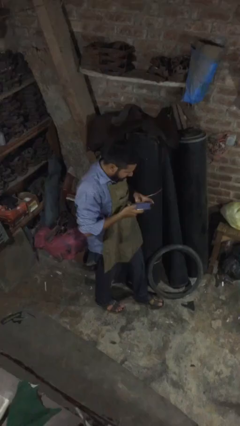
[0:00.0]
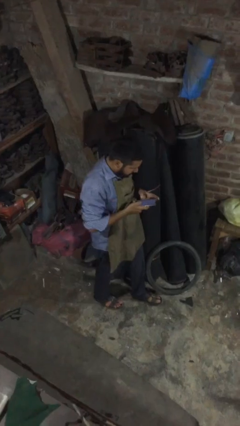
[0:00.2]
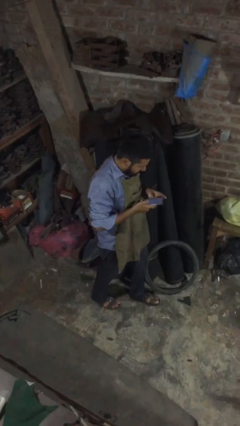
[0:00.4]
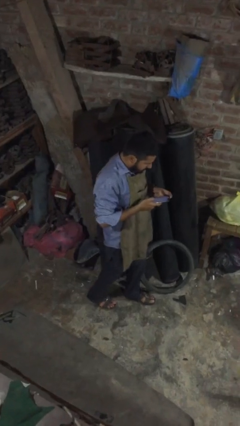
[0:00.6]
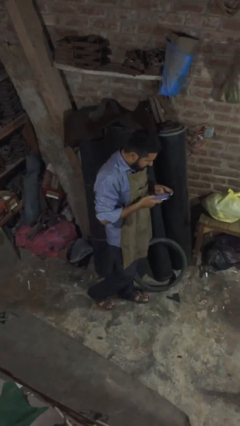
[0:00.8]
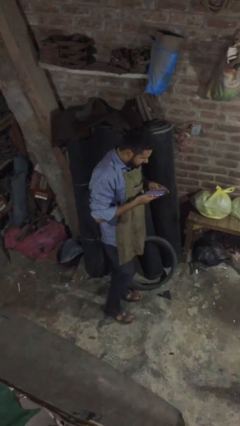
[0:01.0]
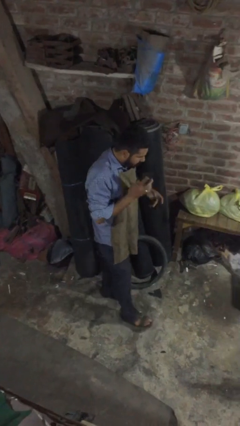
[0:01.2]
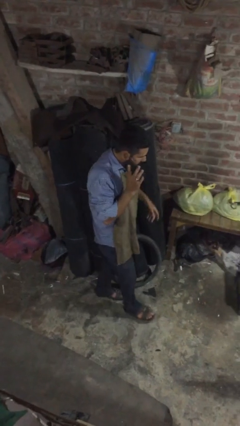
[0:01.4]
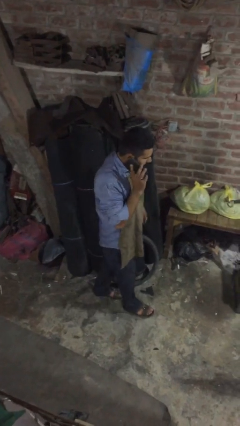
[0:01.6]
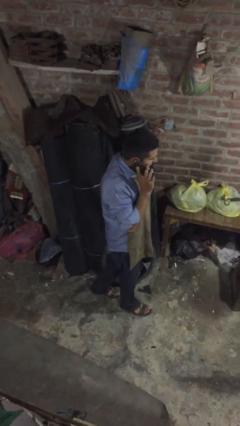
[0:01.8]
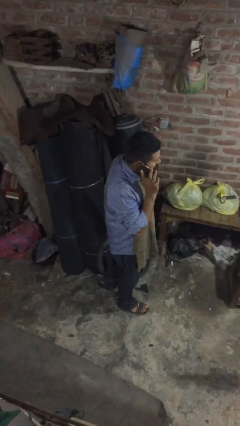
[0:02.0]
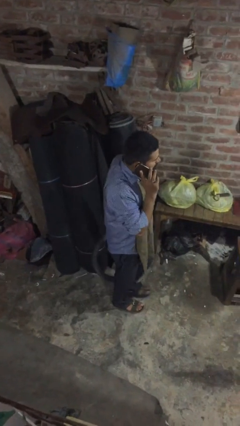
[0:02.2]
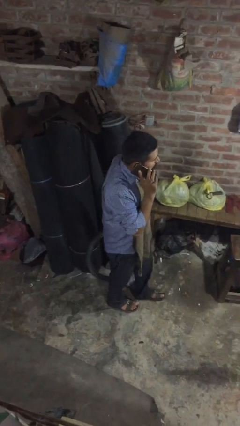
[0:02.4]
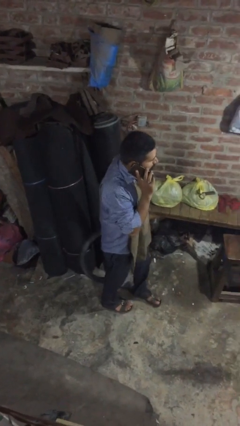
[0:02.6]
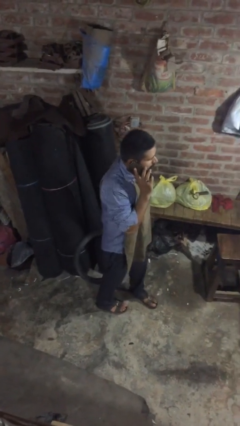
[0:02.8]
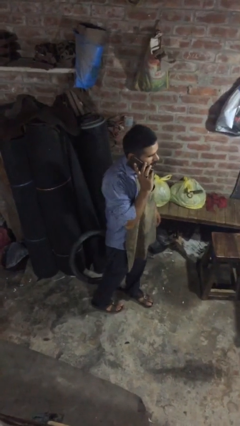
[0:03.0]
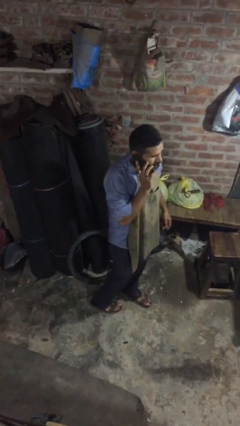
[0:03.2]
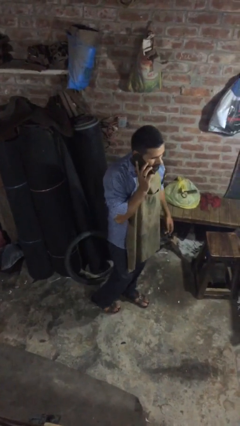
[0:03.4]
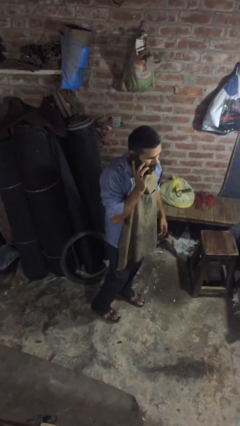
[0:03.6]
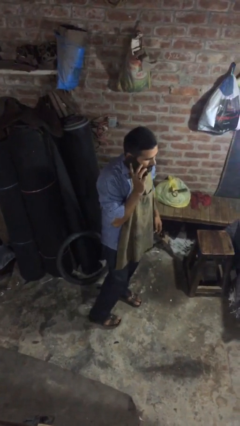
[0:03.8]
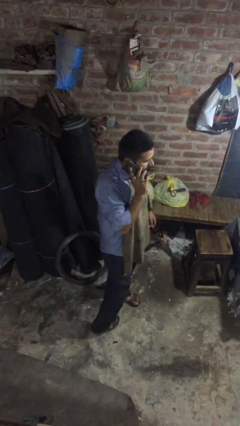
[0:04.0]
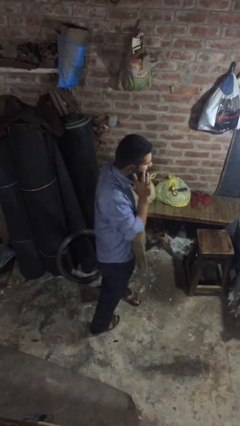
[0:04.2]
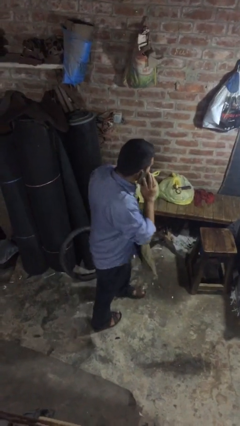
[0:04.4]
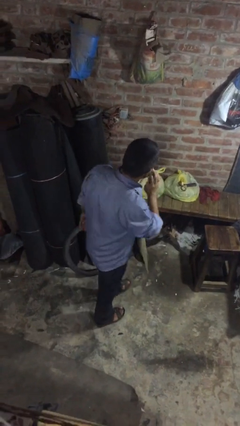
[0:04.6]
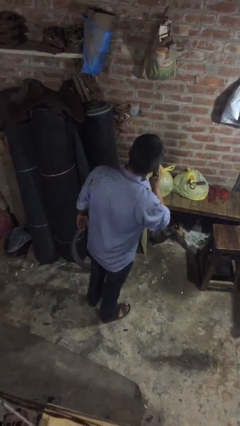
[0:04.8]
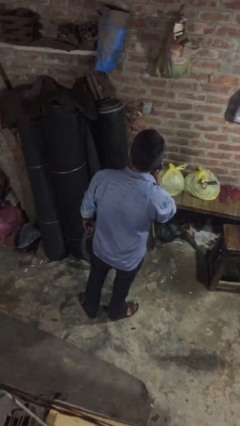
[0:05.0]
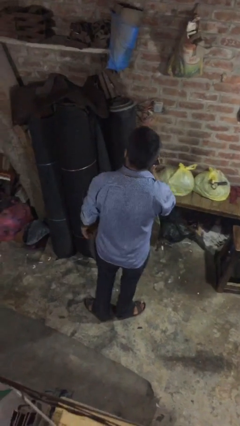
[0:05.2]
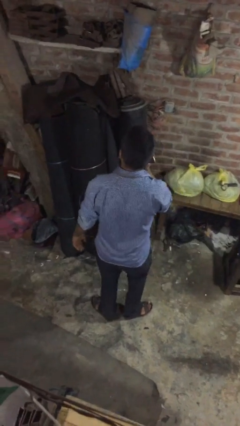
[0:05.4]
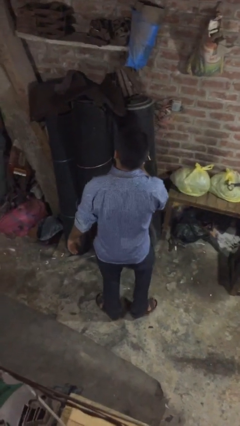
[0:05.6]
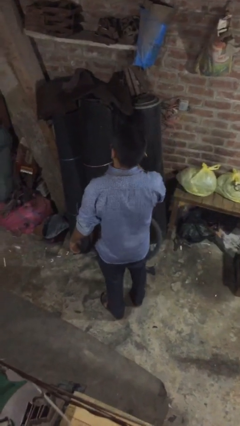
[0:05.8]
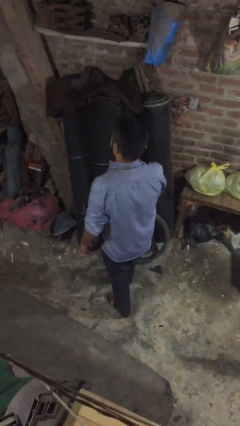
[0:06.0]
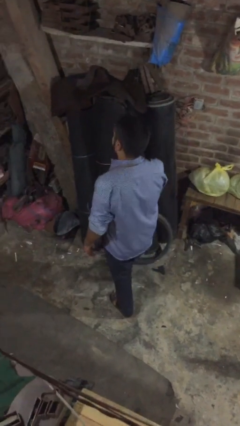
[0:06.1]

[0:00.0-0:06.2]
person talks on phone

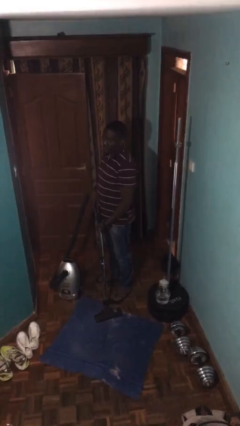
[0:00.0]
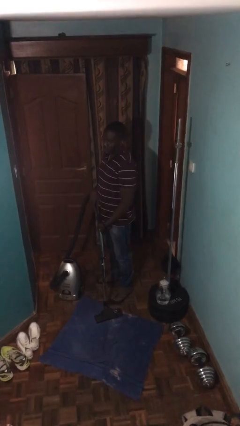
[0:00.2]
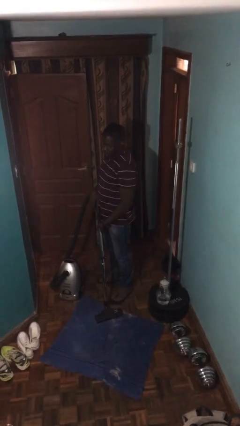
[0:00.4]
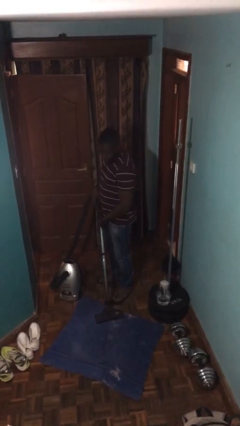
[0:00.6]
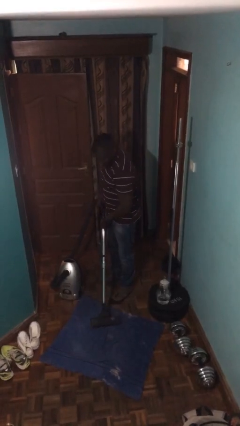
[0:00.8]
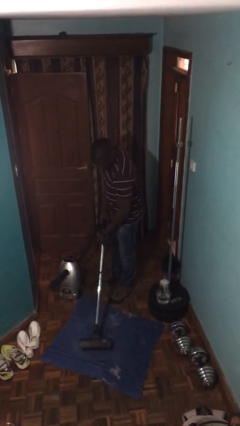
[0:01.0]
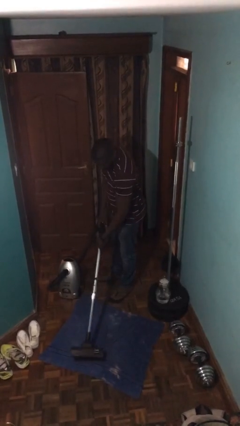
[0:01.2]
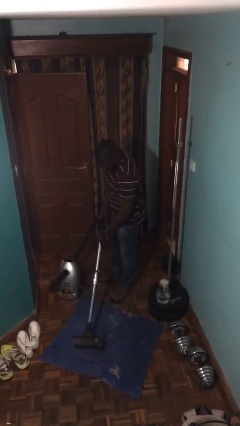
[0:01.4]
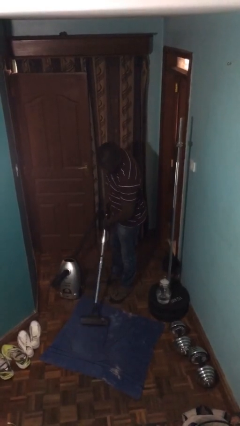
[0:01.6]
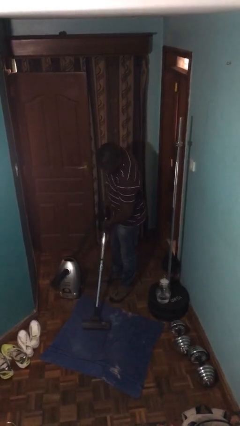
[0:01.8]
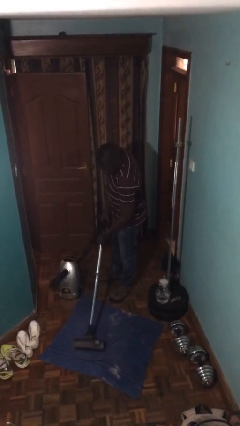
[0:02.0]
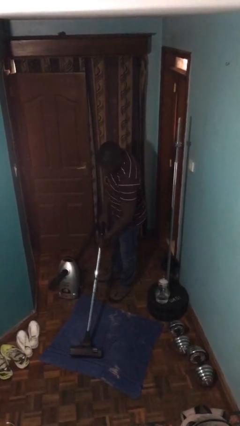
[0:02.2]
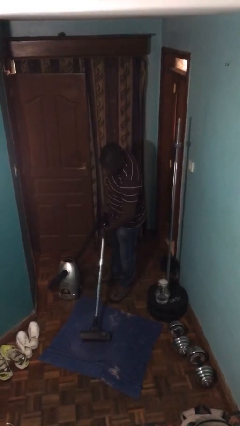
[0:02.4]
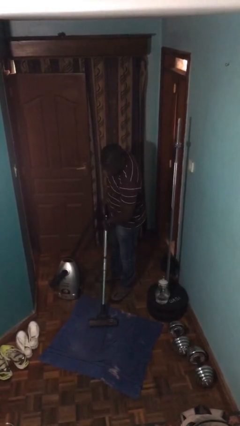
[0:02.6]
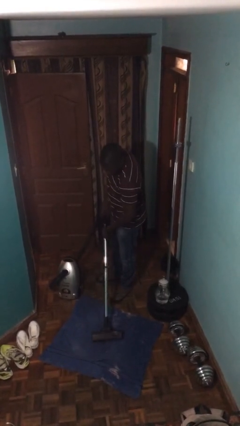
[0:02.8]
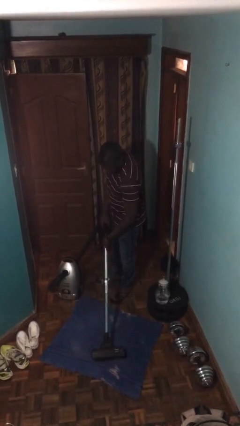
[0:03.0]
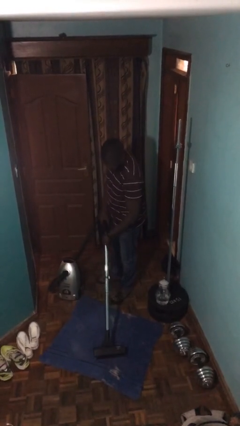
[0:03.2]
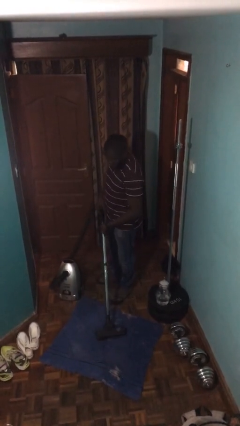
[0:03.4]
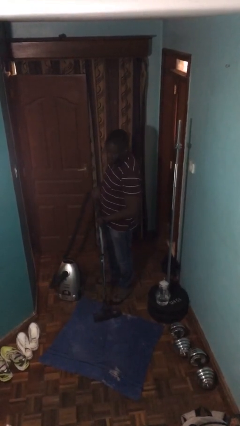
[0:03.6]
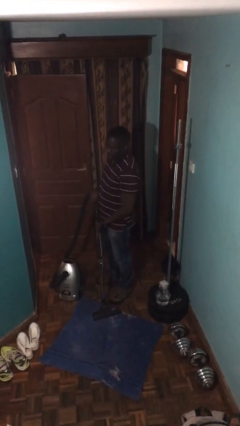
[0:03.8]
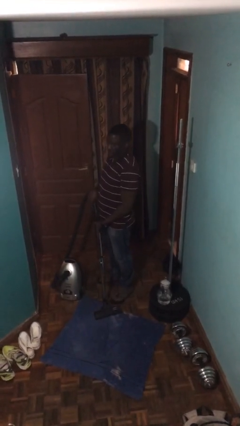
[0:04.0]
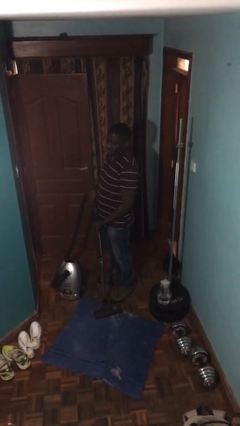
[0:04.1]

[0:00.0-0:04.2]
person vacuums carpet

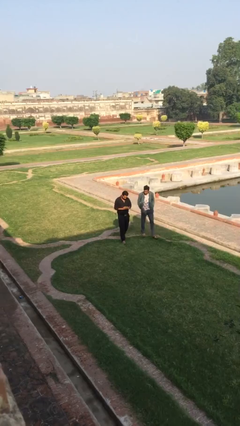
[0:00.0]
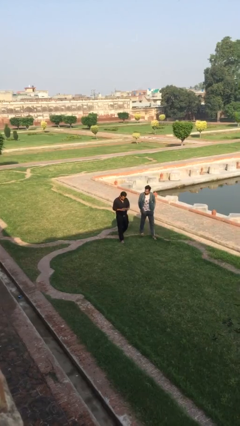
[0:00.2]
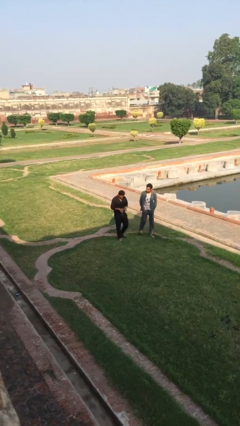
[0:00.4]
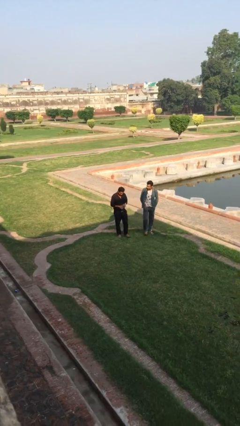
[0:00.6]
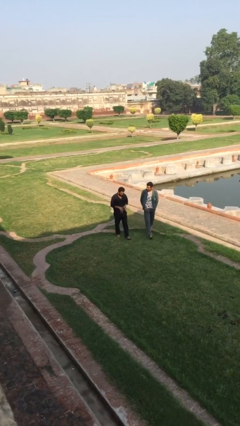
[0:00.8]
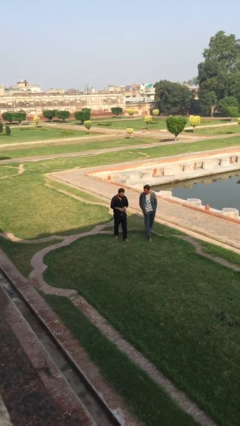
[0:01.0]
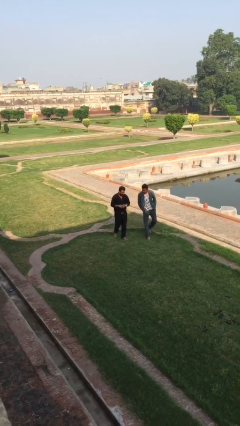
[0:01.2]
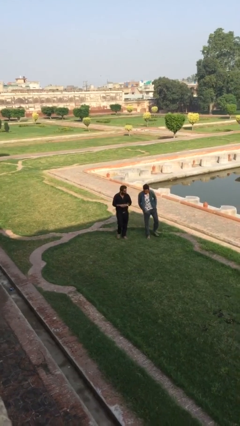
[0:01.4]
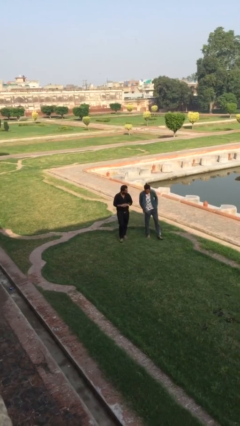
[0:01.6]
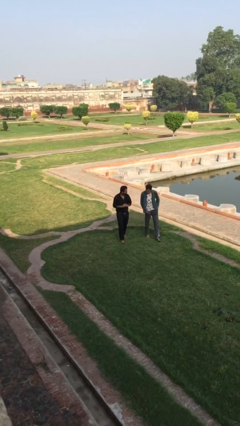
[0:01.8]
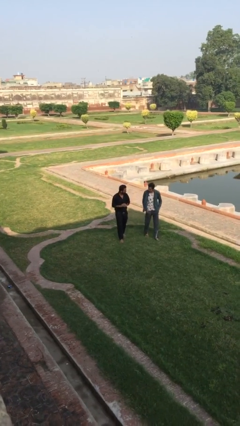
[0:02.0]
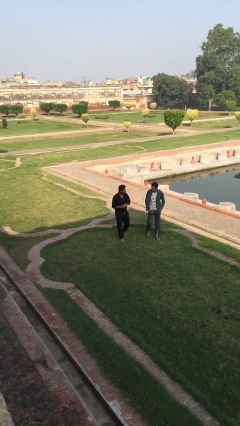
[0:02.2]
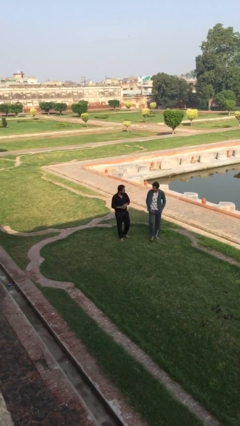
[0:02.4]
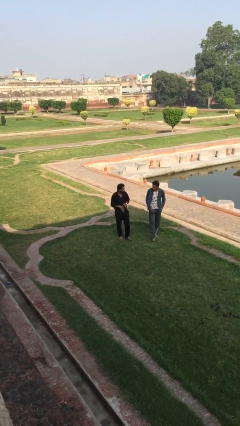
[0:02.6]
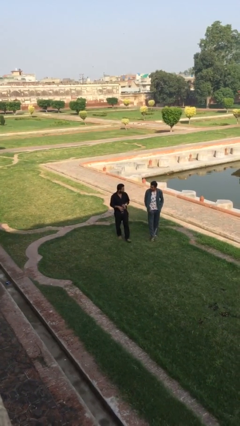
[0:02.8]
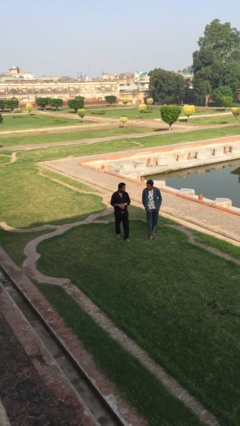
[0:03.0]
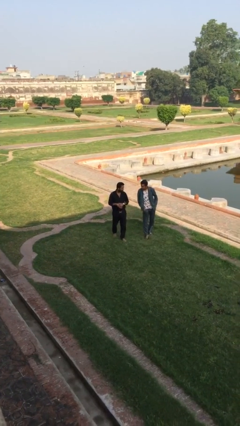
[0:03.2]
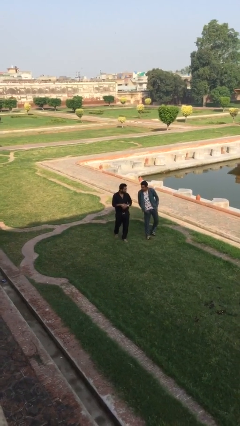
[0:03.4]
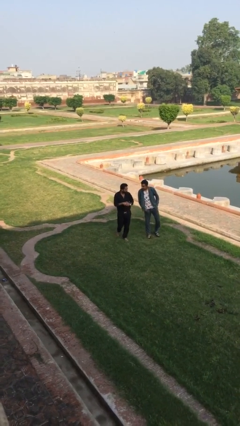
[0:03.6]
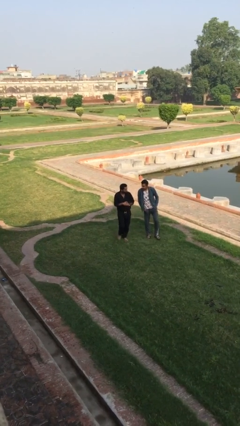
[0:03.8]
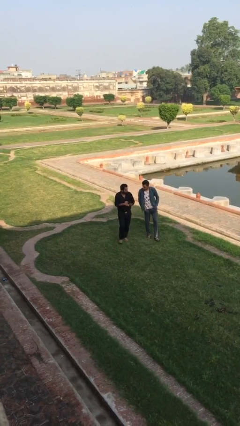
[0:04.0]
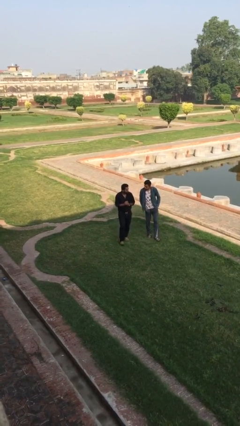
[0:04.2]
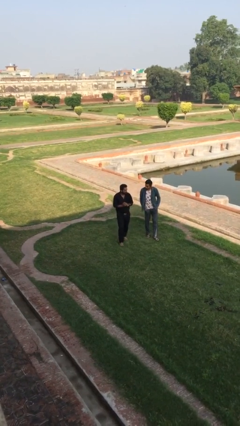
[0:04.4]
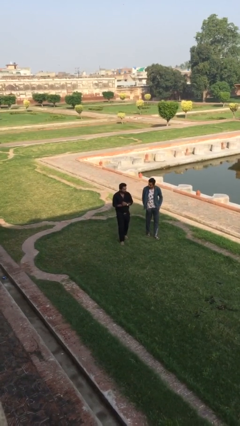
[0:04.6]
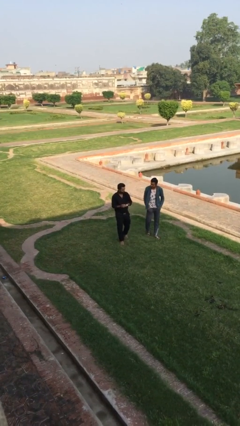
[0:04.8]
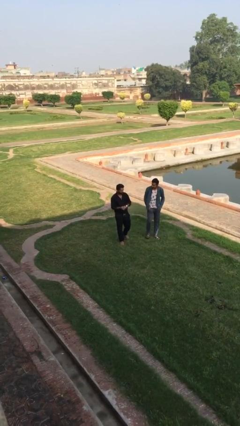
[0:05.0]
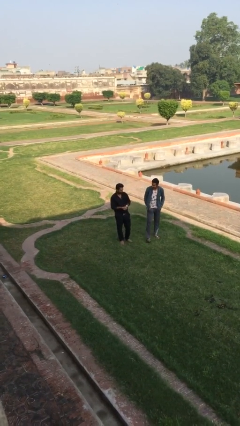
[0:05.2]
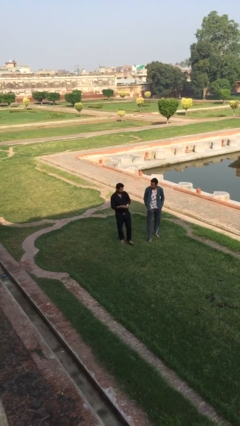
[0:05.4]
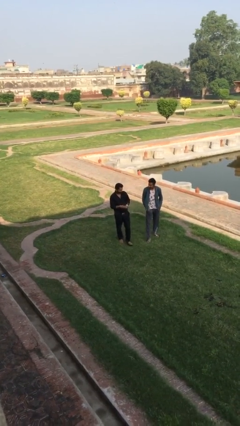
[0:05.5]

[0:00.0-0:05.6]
person talks to person

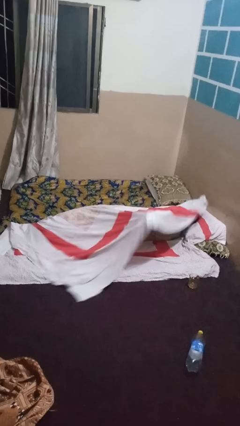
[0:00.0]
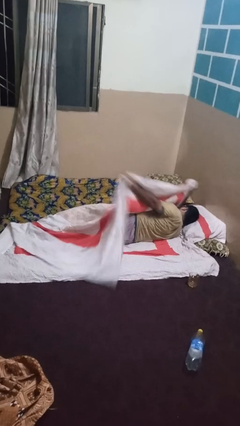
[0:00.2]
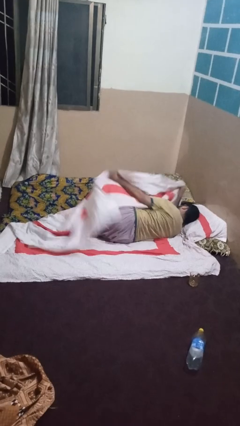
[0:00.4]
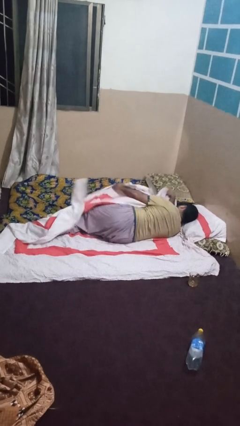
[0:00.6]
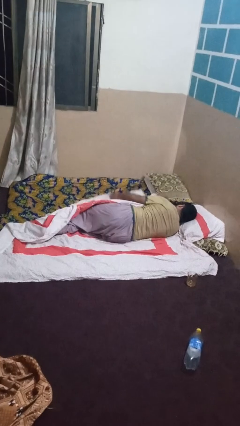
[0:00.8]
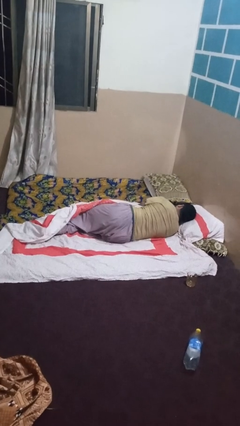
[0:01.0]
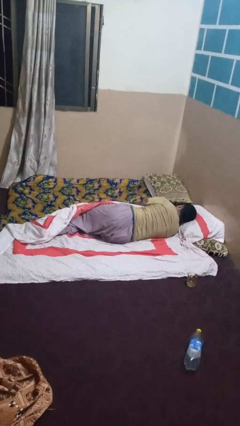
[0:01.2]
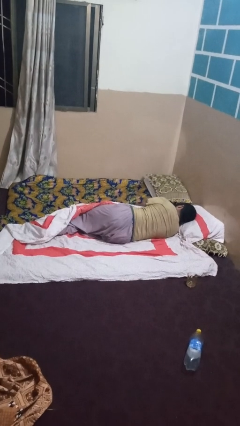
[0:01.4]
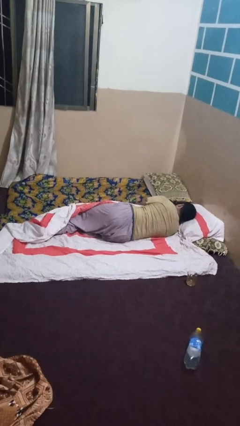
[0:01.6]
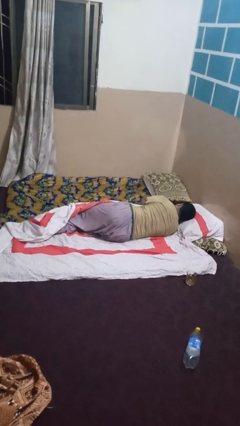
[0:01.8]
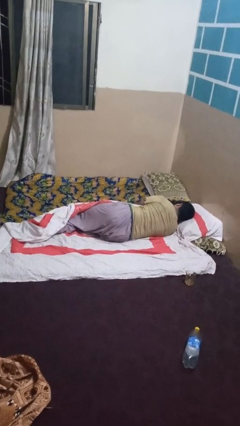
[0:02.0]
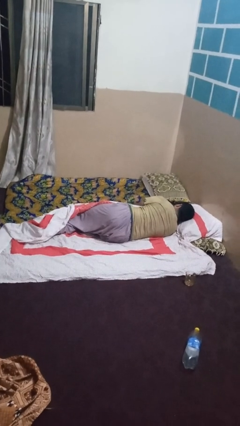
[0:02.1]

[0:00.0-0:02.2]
person uncovers with bedsheets
